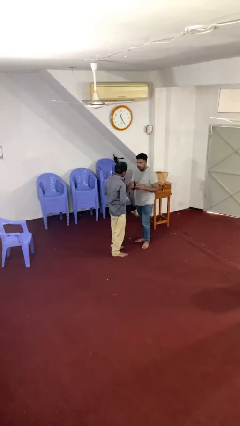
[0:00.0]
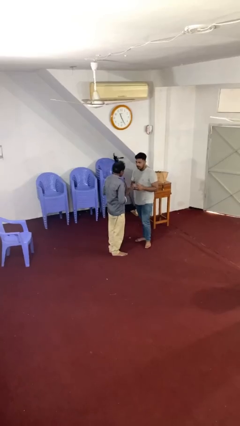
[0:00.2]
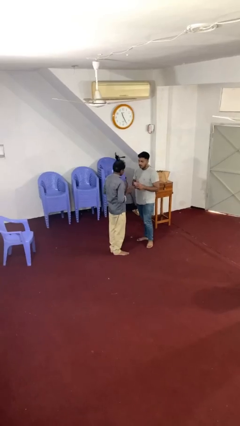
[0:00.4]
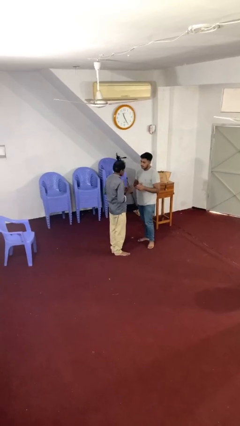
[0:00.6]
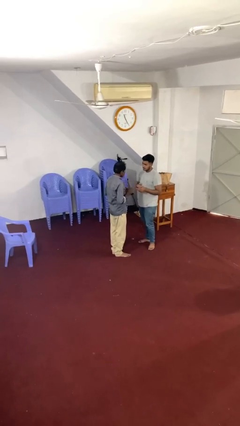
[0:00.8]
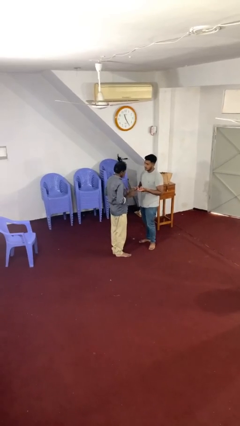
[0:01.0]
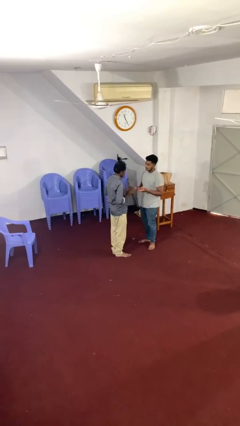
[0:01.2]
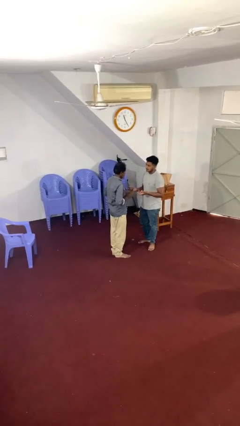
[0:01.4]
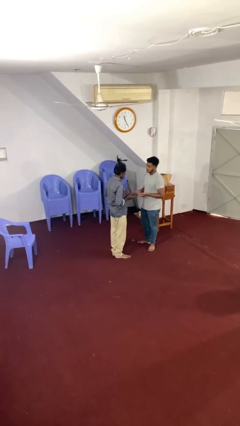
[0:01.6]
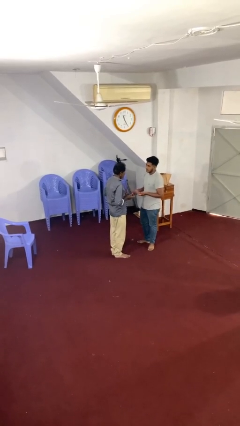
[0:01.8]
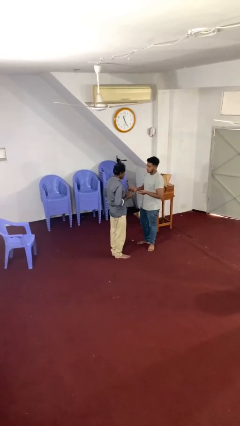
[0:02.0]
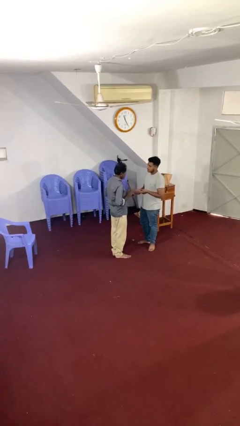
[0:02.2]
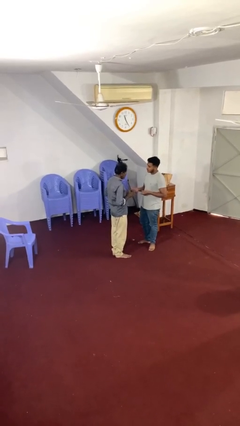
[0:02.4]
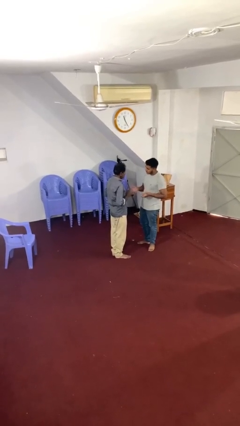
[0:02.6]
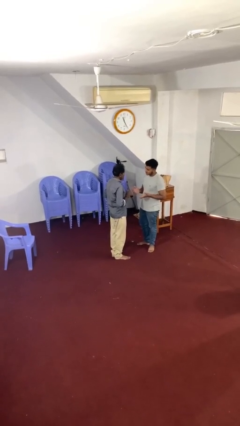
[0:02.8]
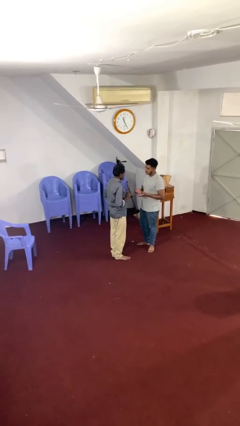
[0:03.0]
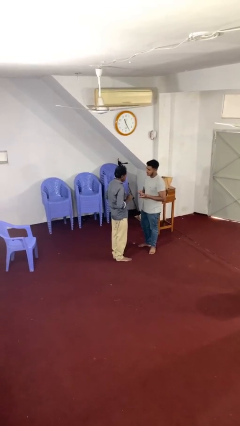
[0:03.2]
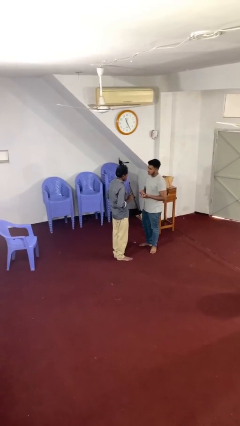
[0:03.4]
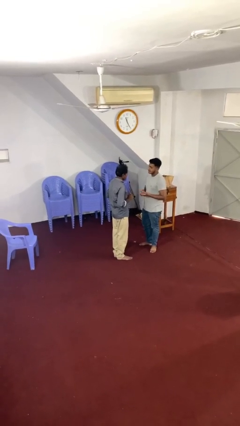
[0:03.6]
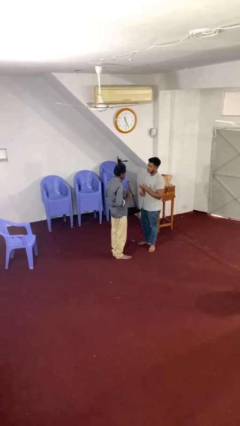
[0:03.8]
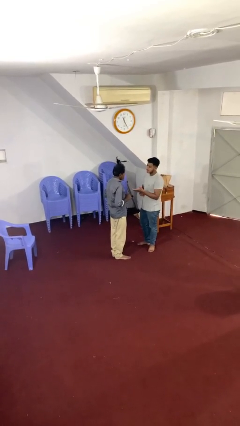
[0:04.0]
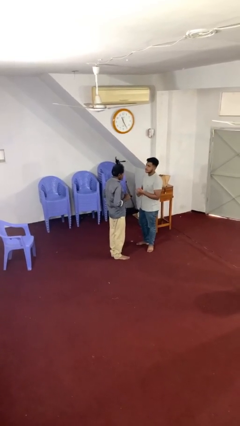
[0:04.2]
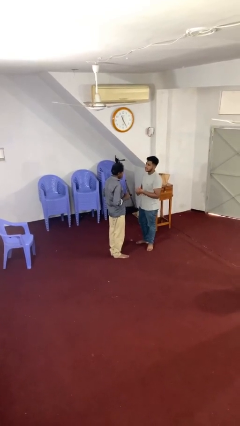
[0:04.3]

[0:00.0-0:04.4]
person talks to person

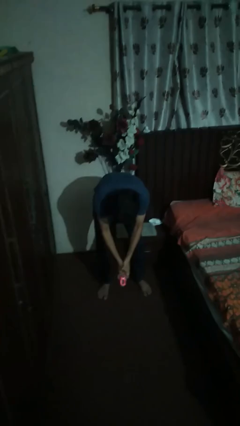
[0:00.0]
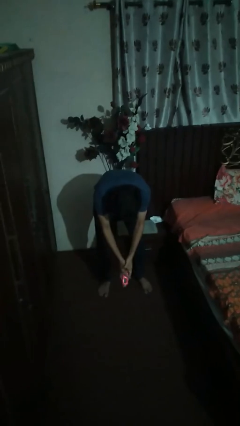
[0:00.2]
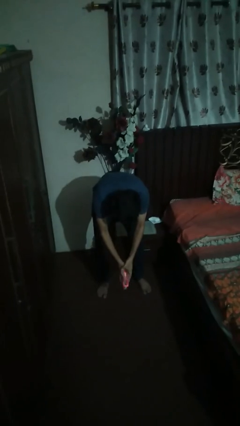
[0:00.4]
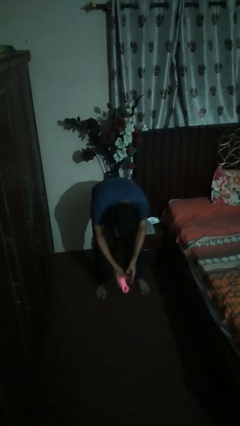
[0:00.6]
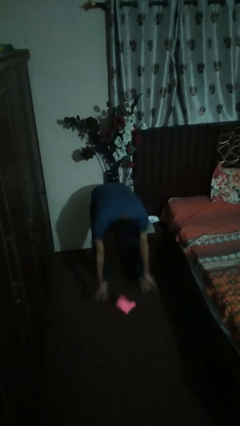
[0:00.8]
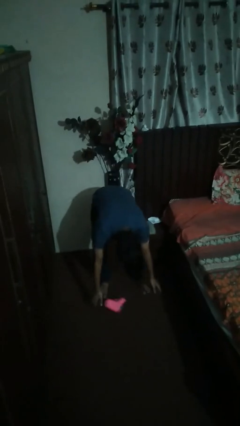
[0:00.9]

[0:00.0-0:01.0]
person catches dropped object

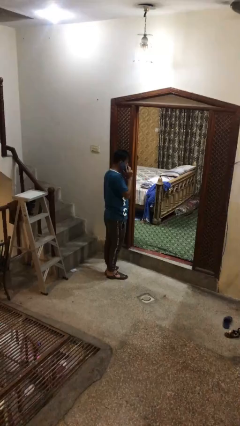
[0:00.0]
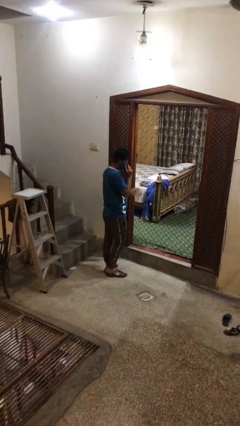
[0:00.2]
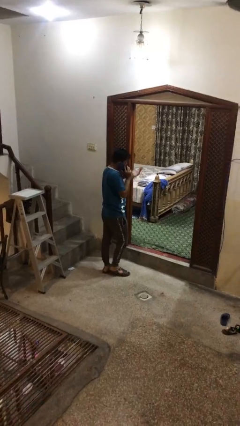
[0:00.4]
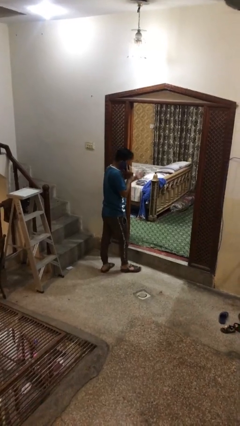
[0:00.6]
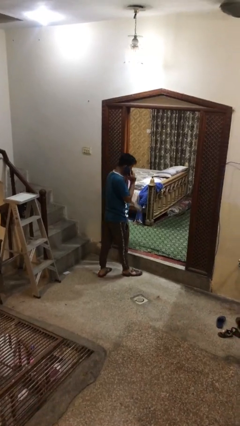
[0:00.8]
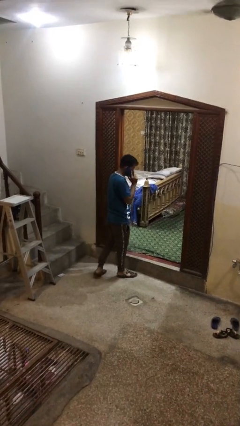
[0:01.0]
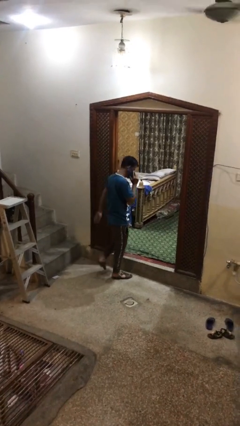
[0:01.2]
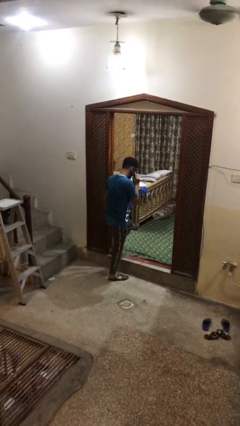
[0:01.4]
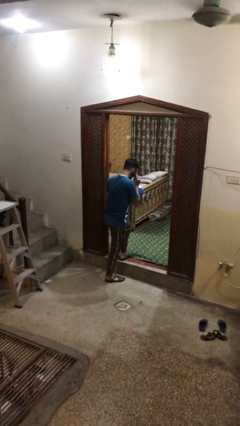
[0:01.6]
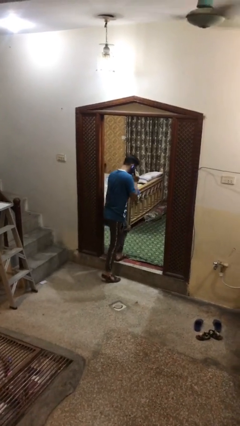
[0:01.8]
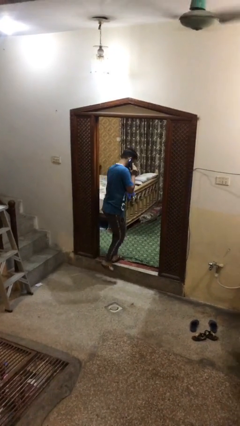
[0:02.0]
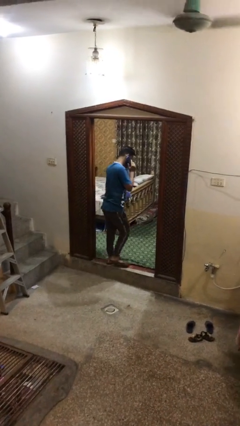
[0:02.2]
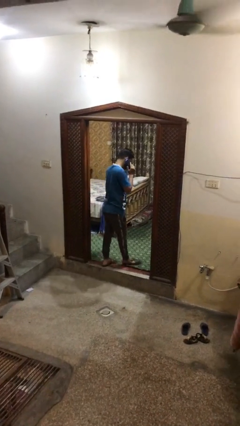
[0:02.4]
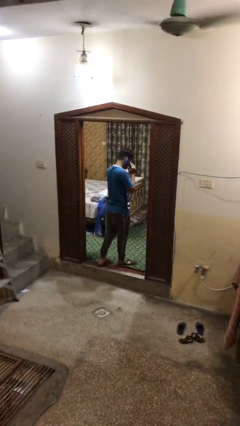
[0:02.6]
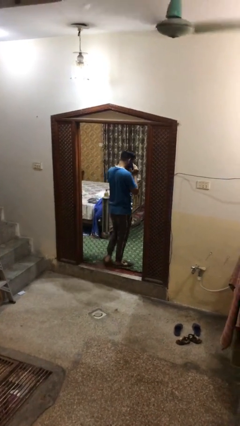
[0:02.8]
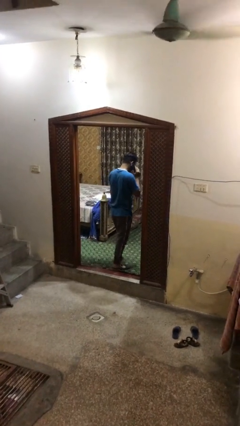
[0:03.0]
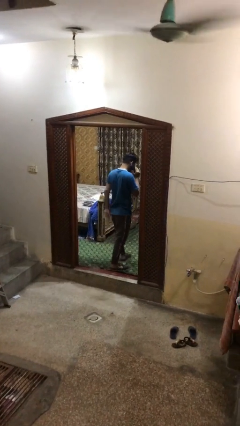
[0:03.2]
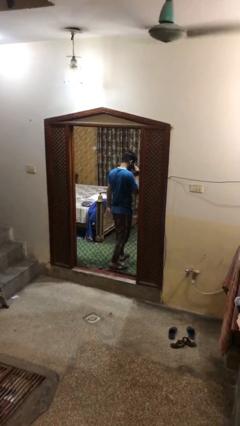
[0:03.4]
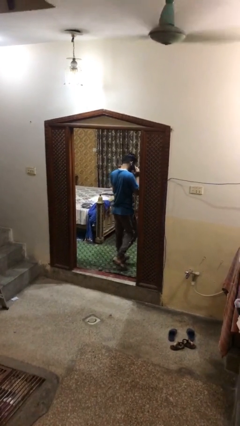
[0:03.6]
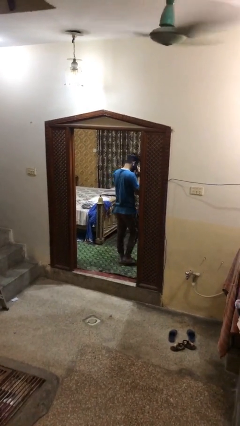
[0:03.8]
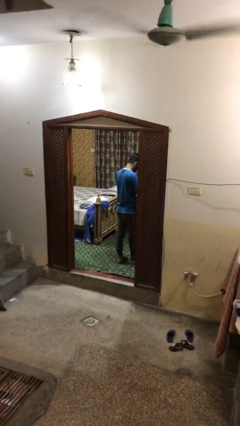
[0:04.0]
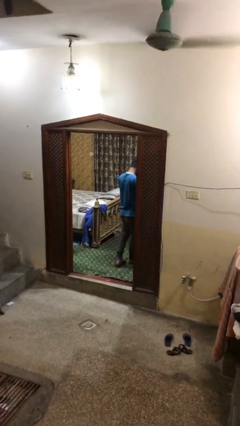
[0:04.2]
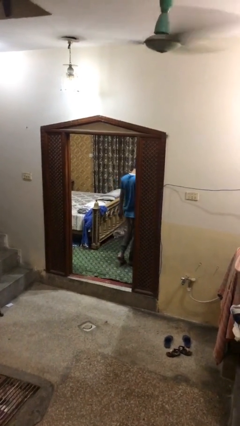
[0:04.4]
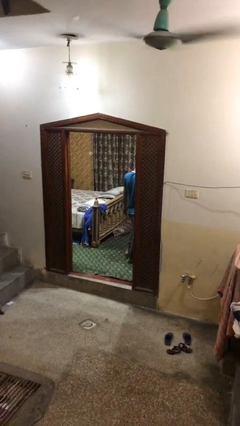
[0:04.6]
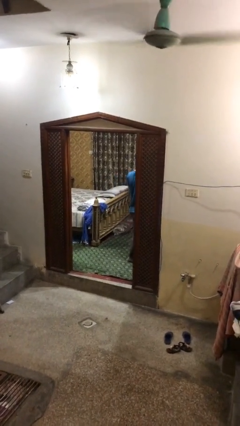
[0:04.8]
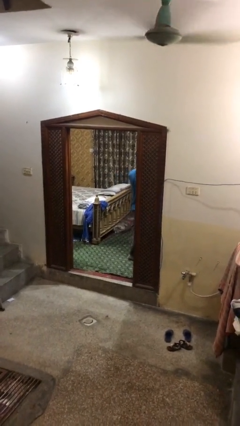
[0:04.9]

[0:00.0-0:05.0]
person exits scene through structure

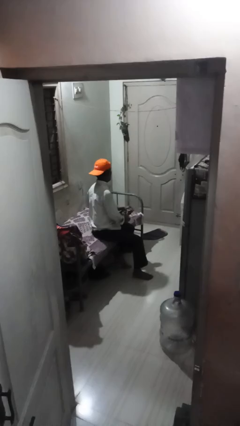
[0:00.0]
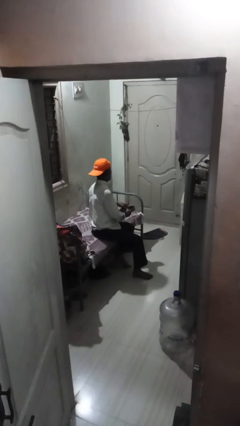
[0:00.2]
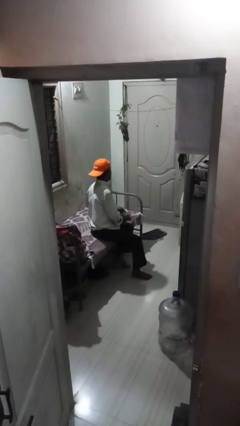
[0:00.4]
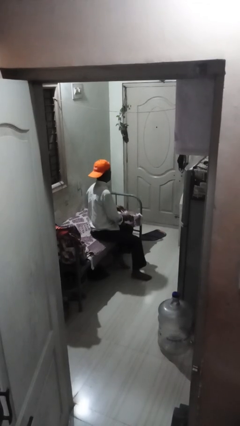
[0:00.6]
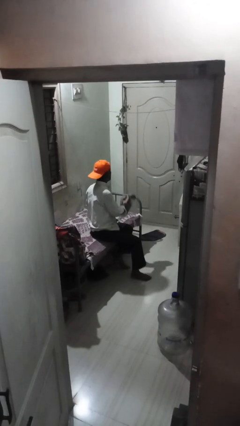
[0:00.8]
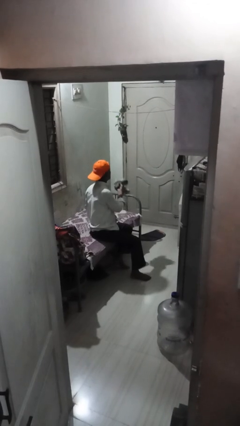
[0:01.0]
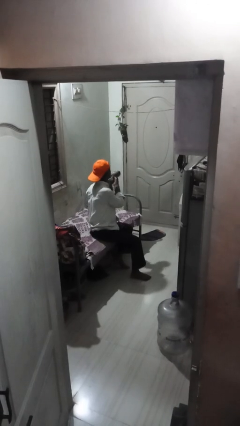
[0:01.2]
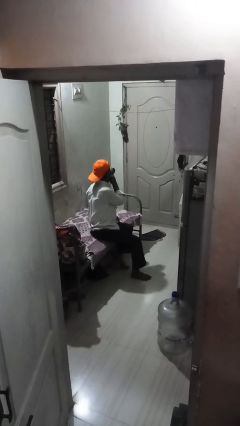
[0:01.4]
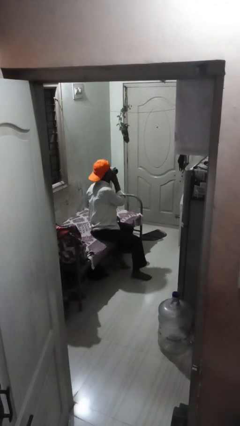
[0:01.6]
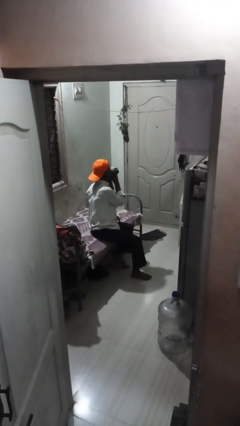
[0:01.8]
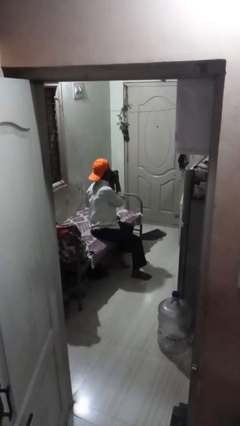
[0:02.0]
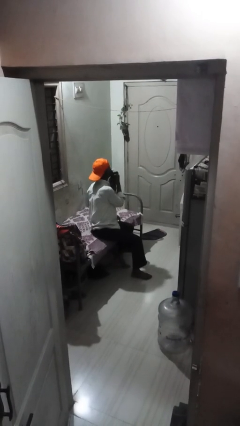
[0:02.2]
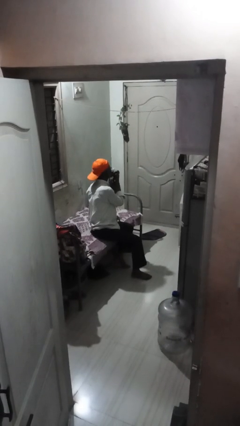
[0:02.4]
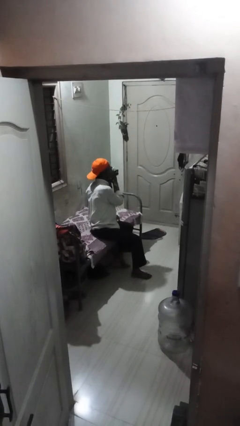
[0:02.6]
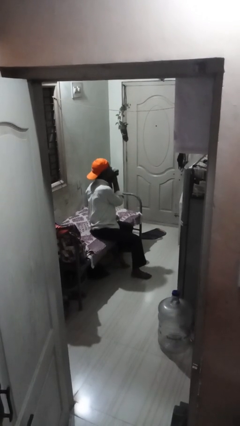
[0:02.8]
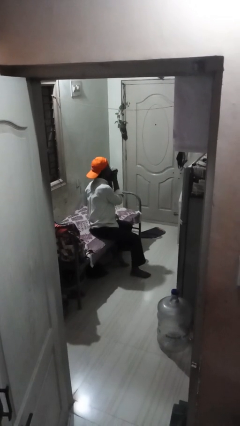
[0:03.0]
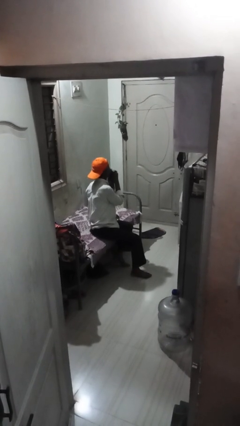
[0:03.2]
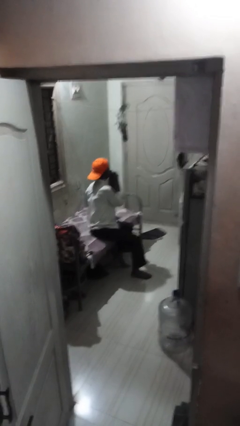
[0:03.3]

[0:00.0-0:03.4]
person wipes mouth with napkin

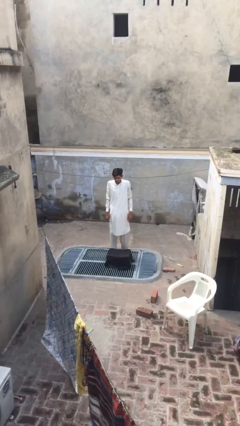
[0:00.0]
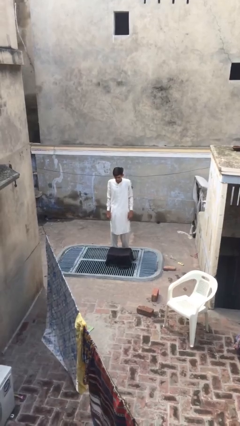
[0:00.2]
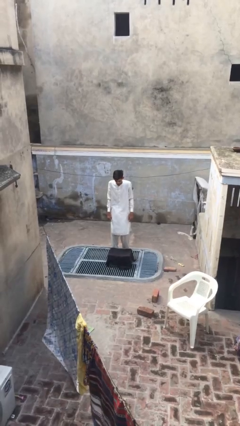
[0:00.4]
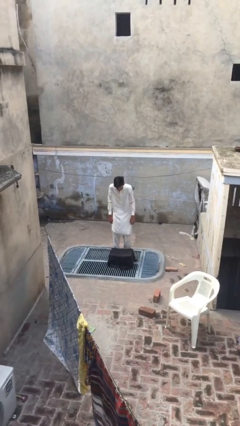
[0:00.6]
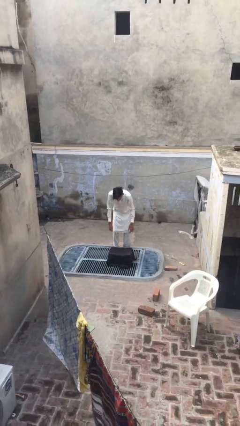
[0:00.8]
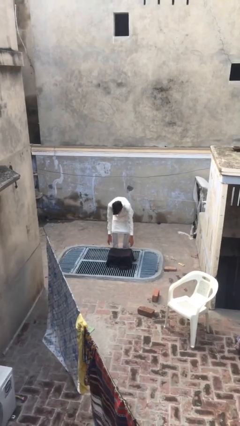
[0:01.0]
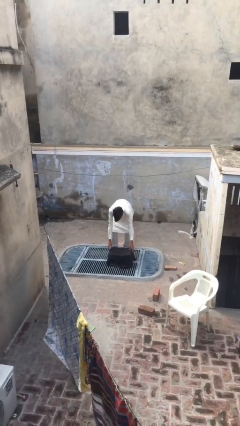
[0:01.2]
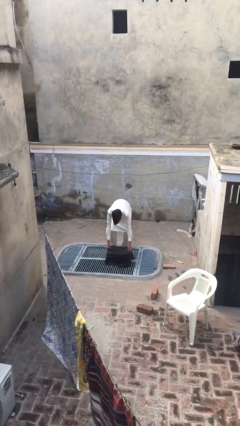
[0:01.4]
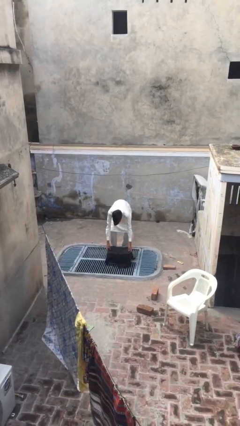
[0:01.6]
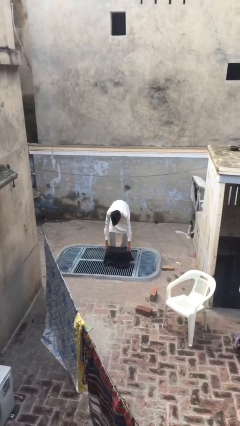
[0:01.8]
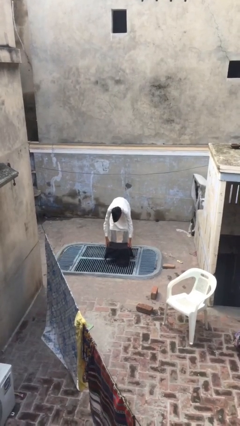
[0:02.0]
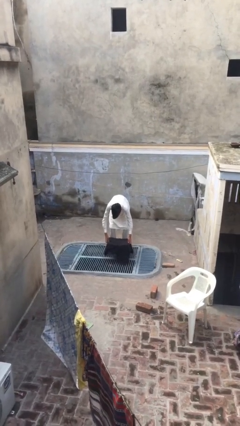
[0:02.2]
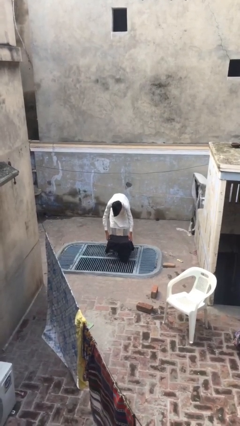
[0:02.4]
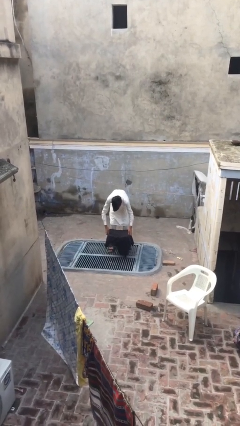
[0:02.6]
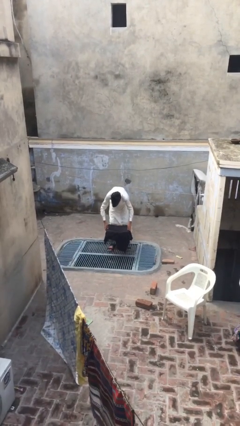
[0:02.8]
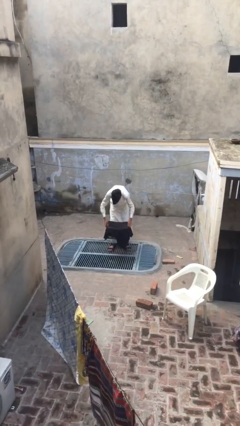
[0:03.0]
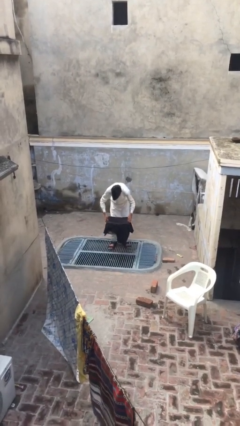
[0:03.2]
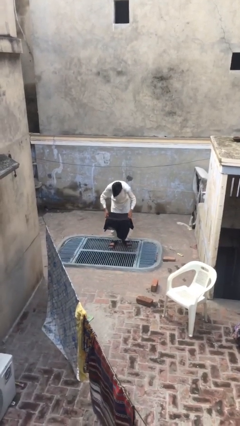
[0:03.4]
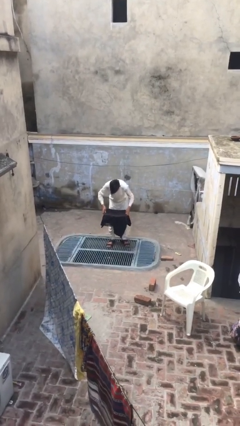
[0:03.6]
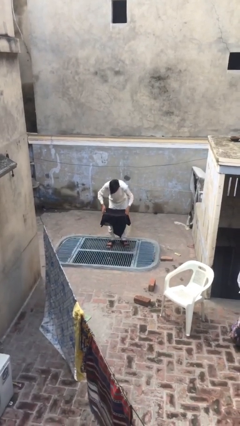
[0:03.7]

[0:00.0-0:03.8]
person picks up object from floor
